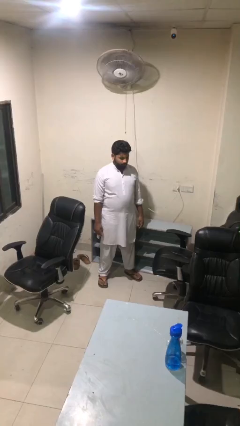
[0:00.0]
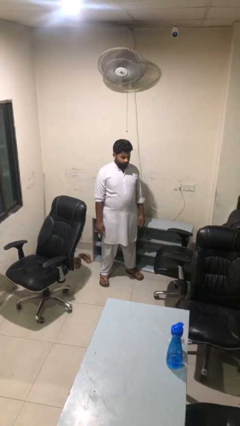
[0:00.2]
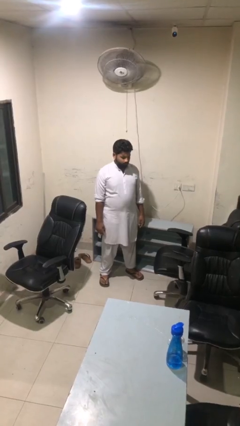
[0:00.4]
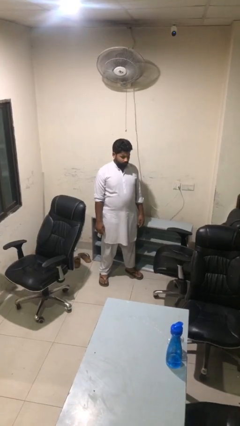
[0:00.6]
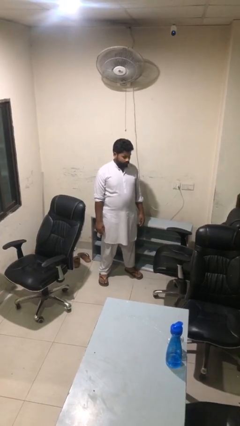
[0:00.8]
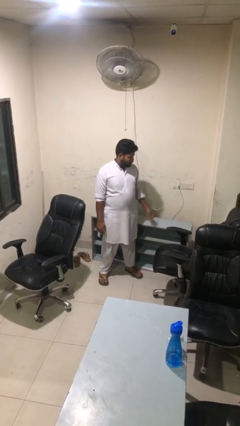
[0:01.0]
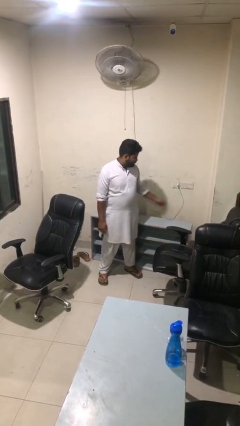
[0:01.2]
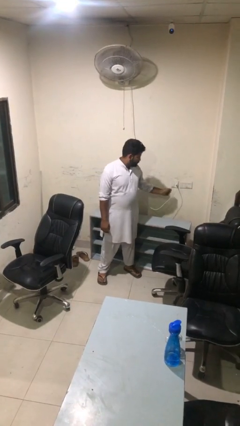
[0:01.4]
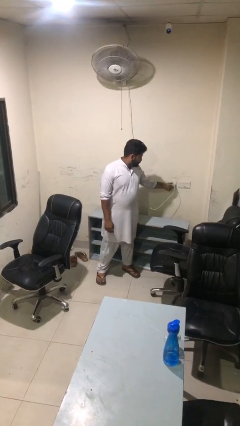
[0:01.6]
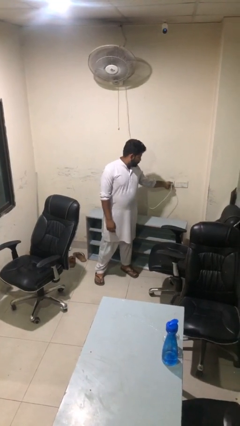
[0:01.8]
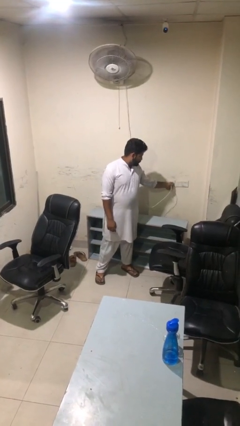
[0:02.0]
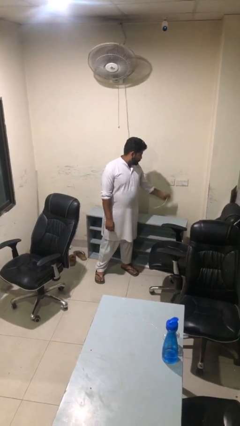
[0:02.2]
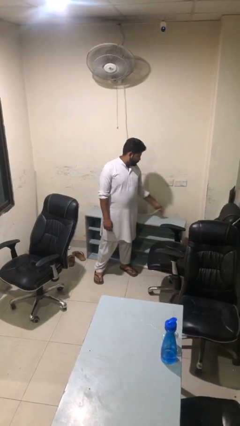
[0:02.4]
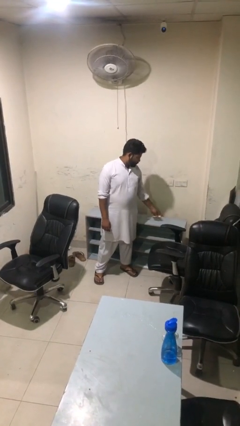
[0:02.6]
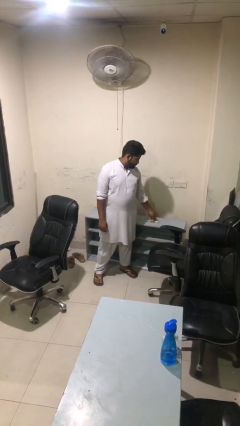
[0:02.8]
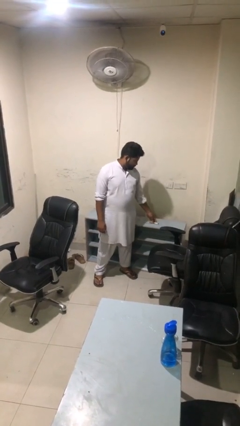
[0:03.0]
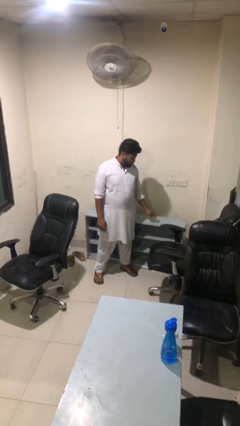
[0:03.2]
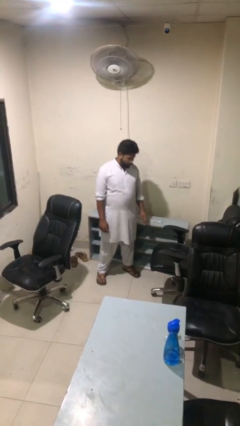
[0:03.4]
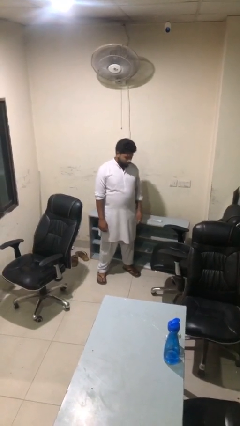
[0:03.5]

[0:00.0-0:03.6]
person unplugs from electrical socket

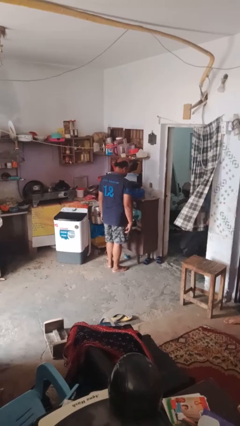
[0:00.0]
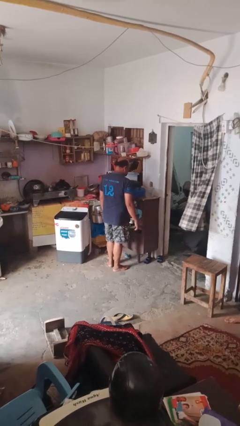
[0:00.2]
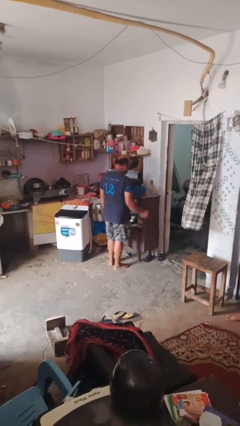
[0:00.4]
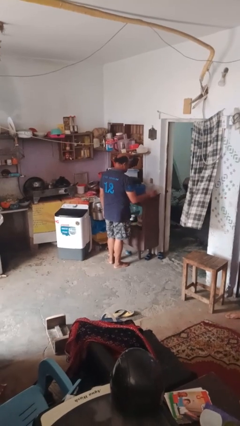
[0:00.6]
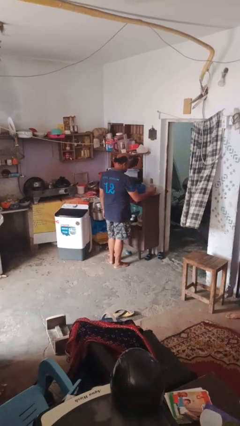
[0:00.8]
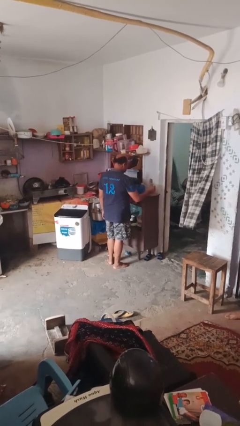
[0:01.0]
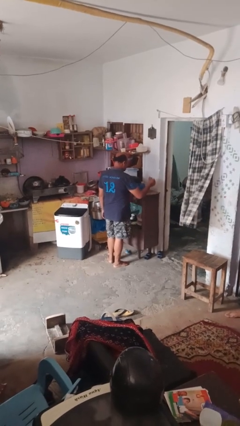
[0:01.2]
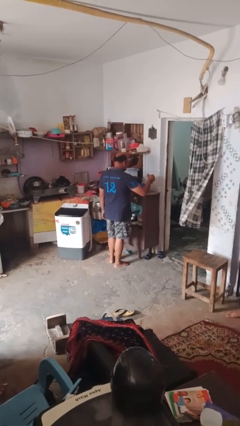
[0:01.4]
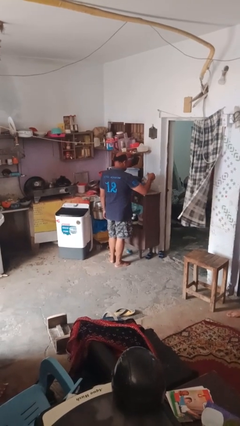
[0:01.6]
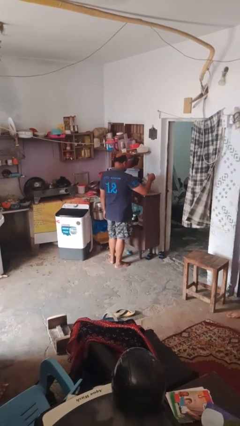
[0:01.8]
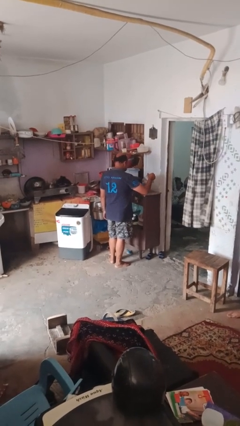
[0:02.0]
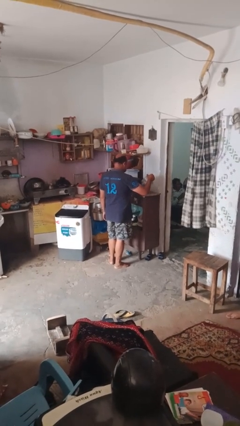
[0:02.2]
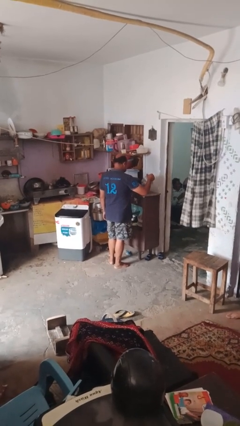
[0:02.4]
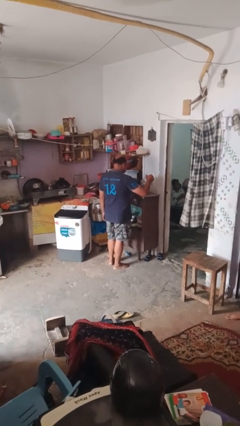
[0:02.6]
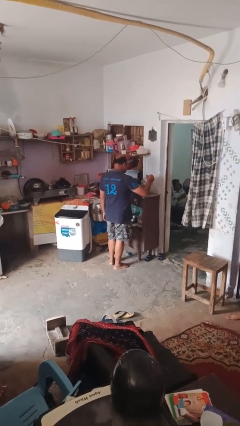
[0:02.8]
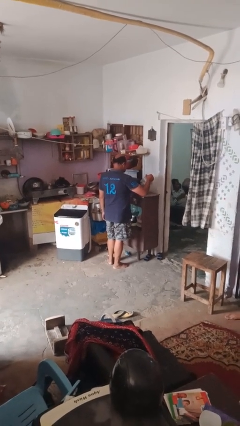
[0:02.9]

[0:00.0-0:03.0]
person pours into bowl

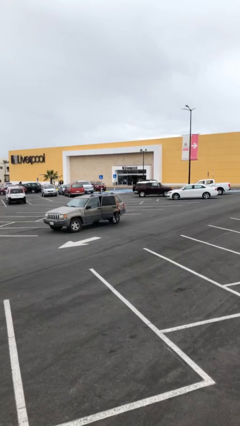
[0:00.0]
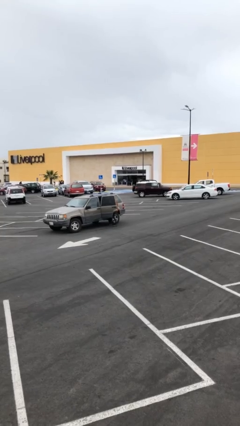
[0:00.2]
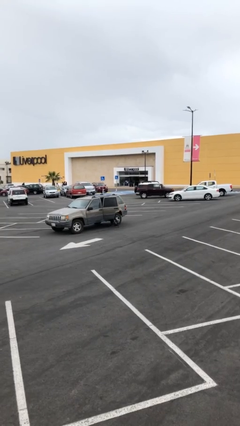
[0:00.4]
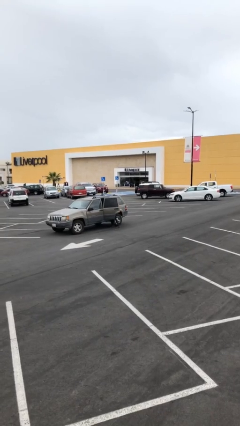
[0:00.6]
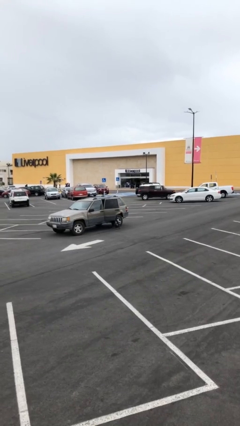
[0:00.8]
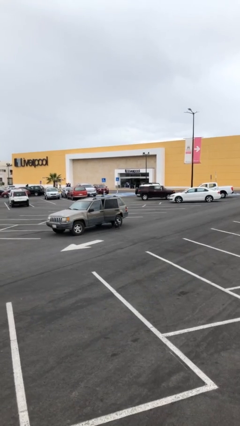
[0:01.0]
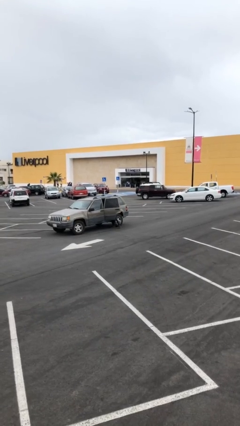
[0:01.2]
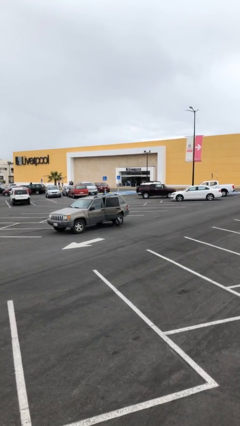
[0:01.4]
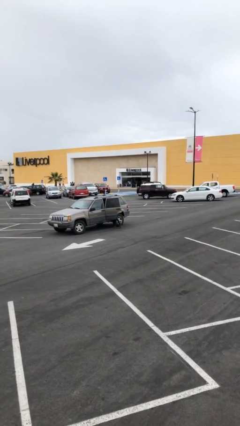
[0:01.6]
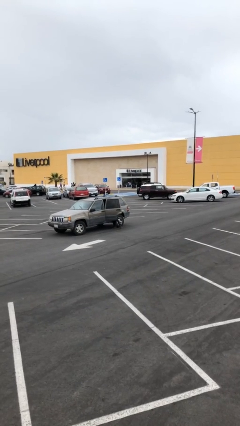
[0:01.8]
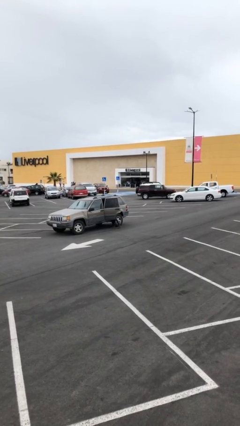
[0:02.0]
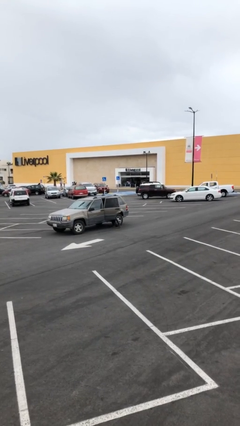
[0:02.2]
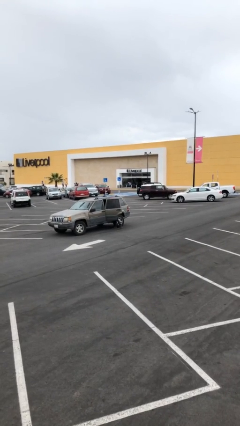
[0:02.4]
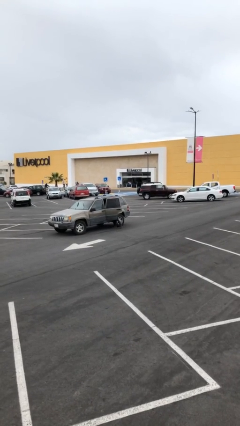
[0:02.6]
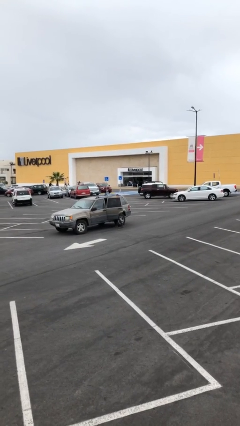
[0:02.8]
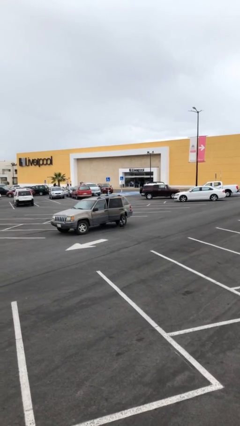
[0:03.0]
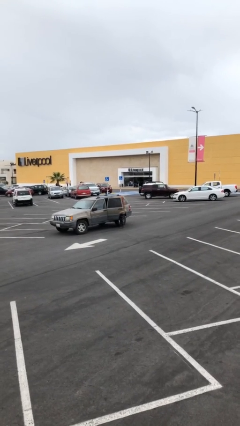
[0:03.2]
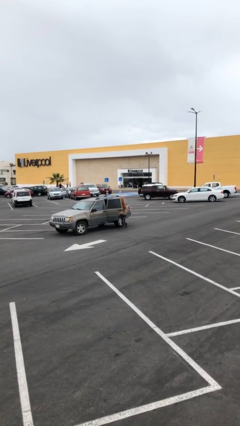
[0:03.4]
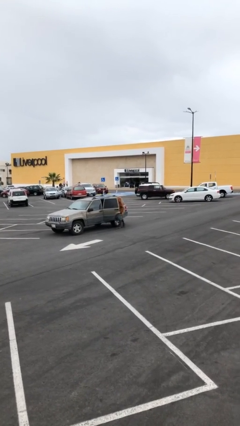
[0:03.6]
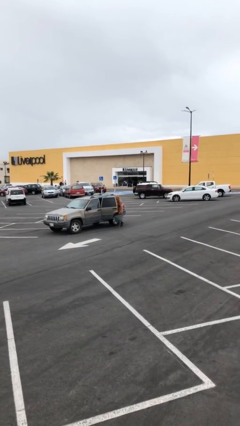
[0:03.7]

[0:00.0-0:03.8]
person unloads car

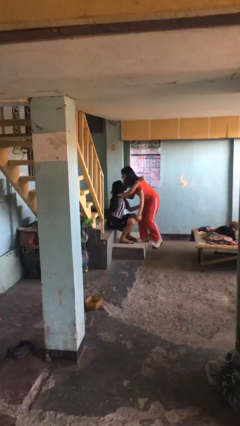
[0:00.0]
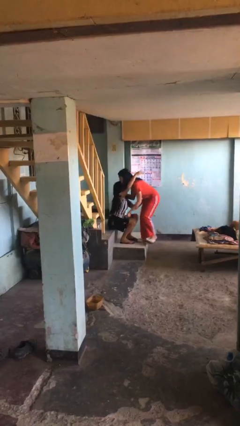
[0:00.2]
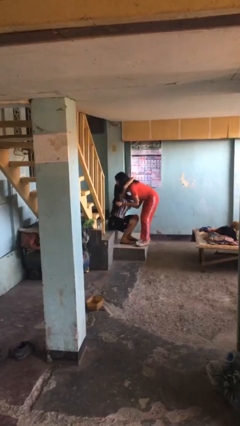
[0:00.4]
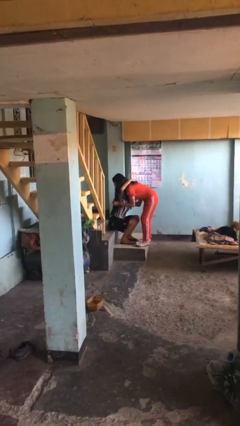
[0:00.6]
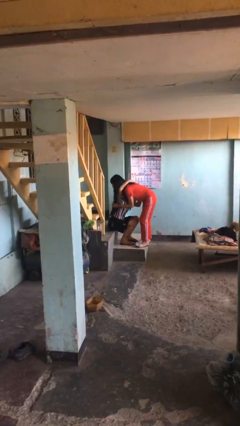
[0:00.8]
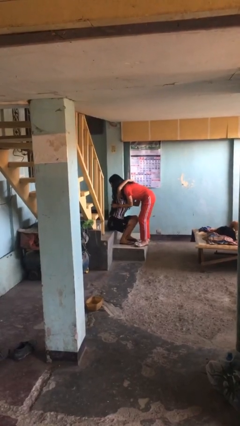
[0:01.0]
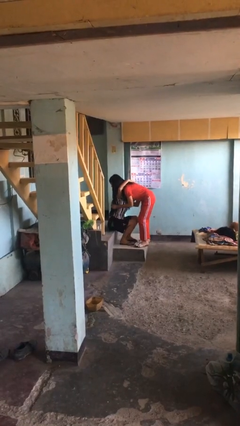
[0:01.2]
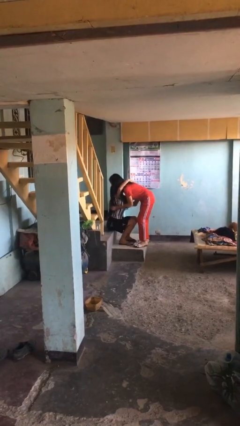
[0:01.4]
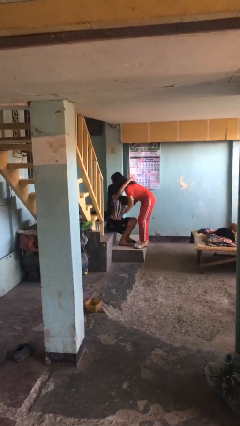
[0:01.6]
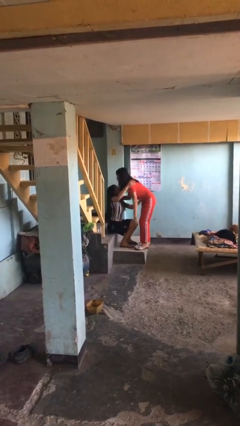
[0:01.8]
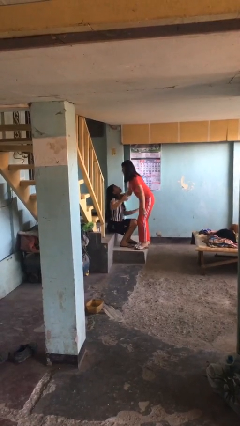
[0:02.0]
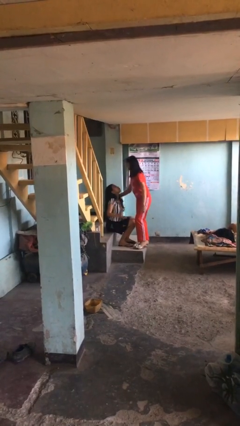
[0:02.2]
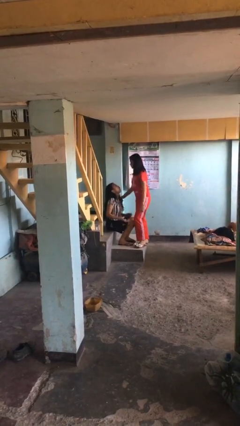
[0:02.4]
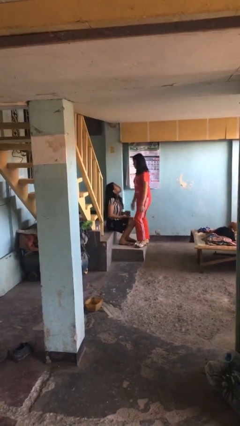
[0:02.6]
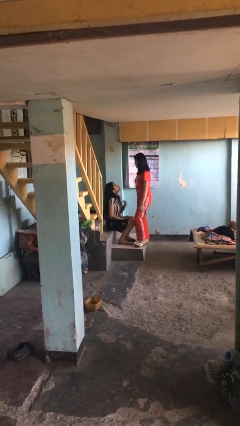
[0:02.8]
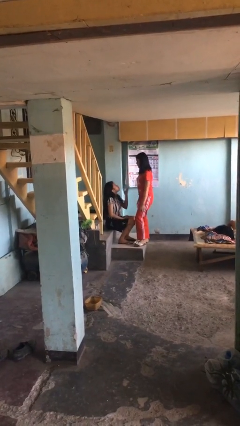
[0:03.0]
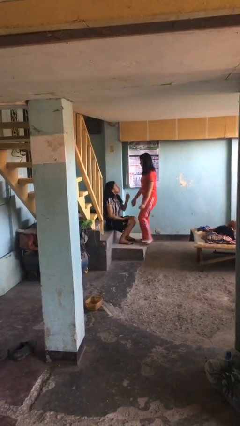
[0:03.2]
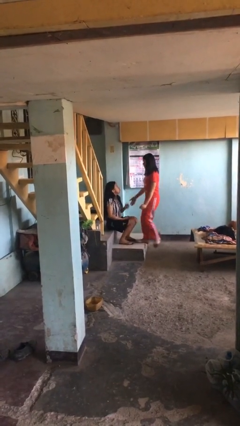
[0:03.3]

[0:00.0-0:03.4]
person embraces person

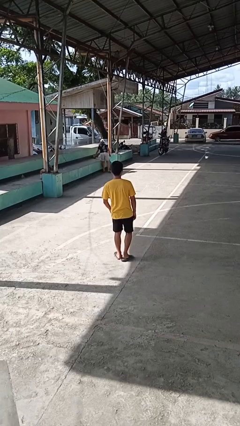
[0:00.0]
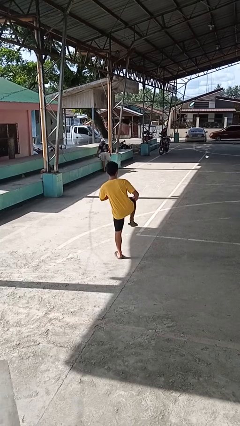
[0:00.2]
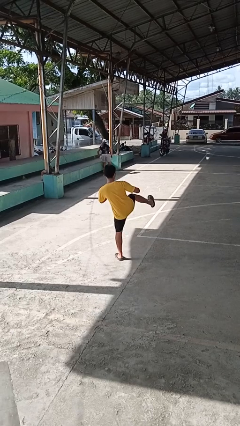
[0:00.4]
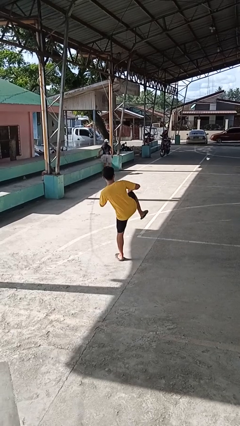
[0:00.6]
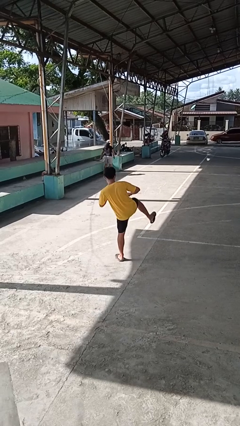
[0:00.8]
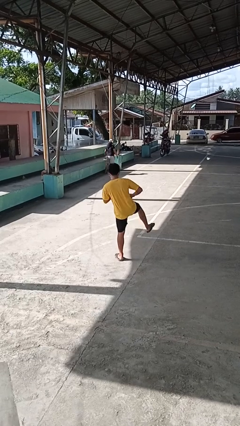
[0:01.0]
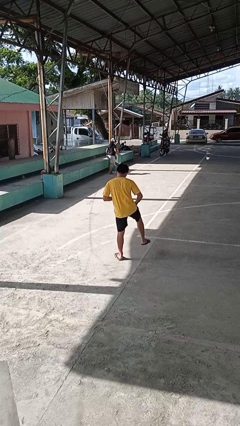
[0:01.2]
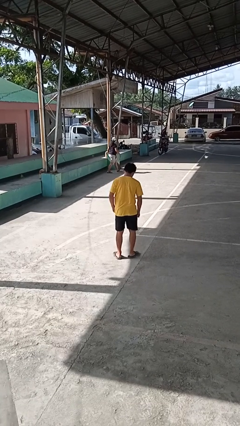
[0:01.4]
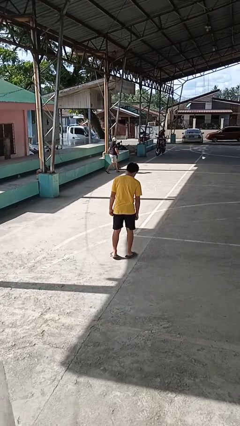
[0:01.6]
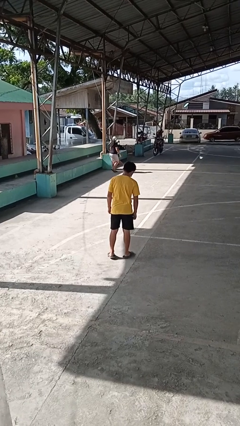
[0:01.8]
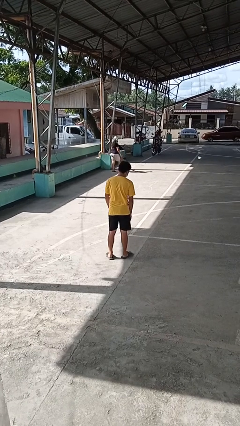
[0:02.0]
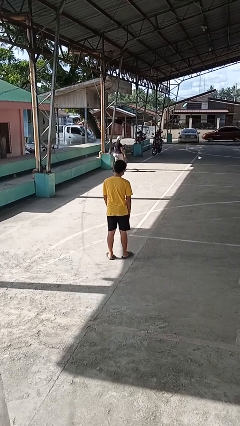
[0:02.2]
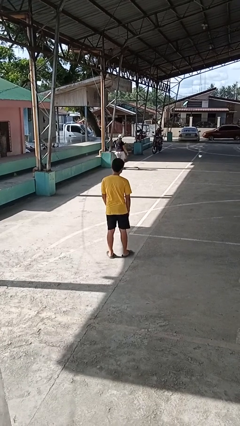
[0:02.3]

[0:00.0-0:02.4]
person karate kicks

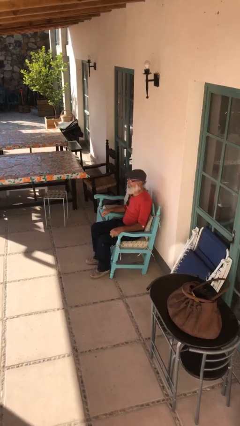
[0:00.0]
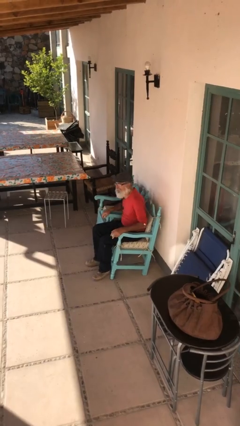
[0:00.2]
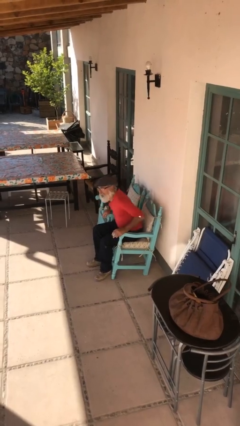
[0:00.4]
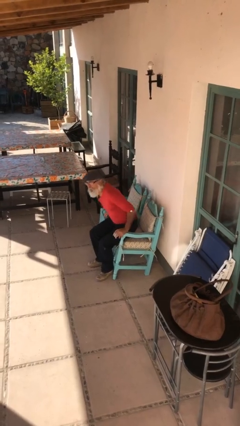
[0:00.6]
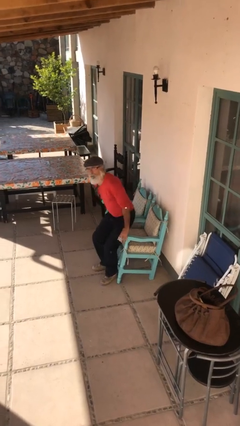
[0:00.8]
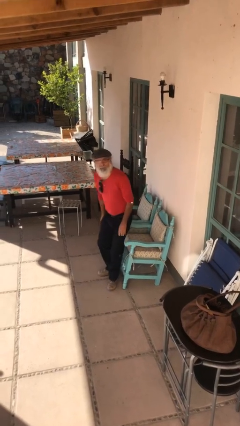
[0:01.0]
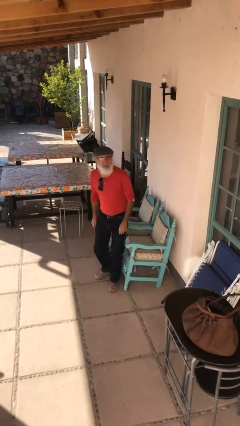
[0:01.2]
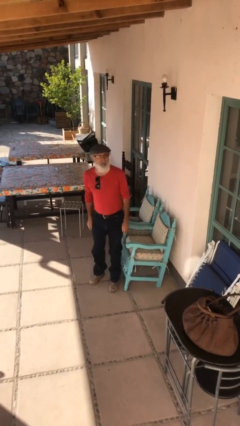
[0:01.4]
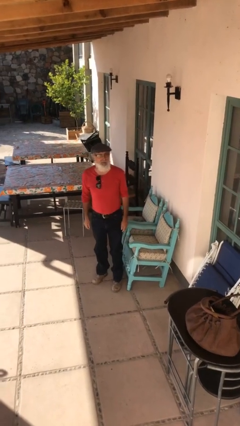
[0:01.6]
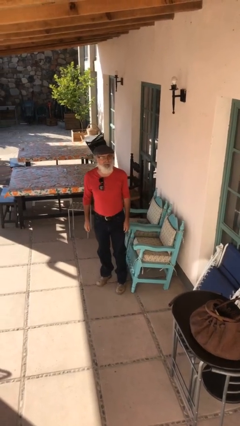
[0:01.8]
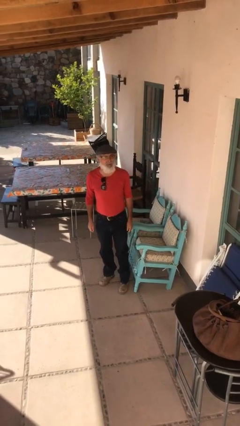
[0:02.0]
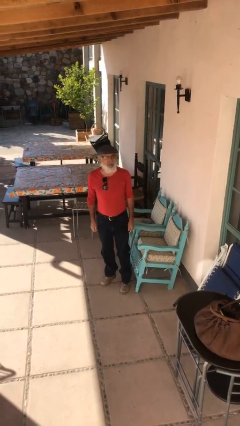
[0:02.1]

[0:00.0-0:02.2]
person stands up
